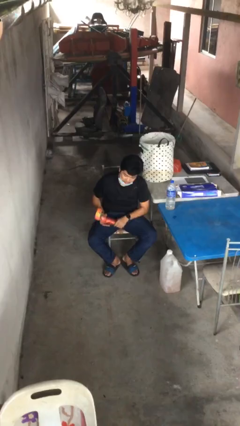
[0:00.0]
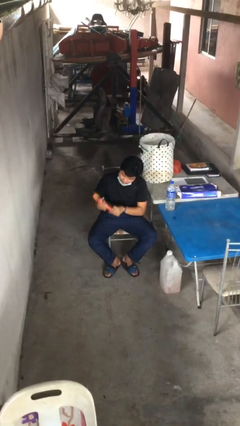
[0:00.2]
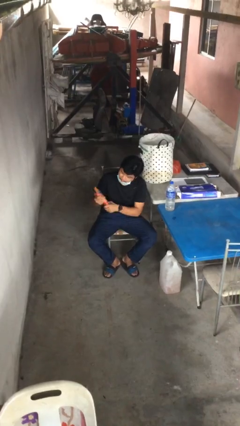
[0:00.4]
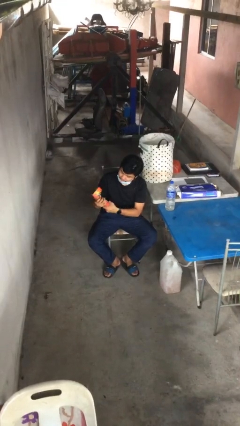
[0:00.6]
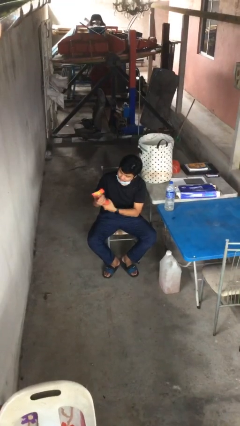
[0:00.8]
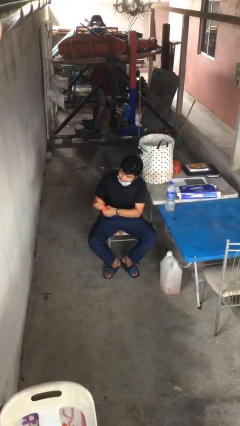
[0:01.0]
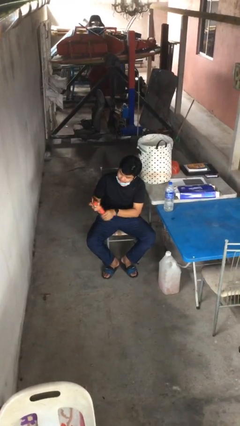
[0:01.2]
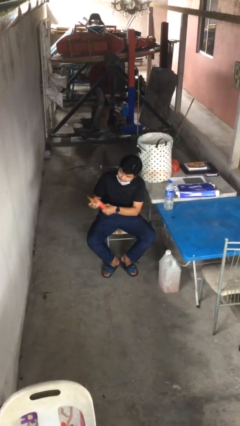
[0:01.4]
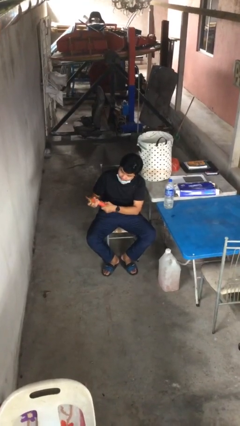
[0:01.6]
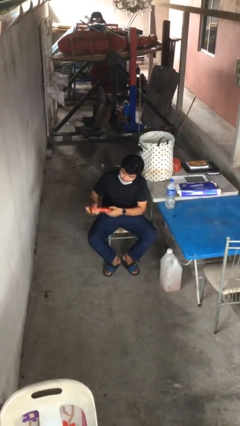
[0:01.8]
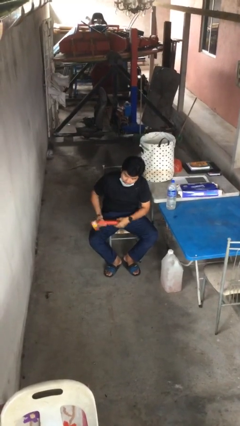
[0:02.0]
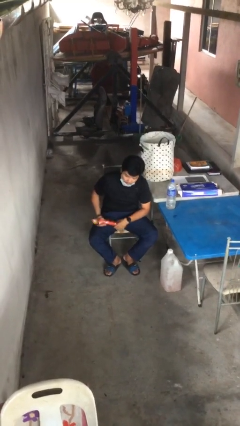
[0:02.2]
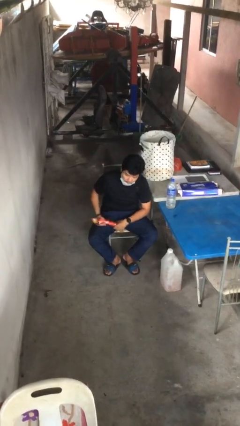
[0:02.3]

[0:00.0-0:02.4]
person squeezes object

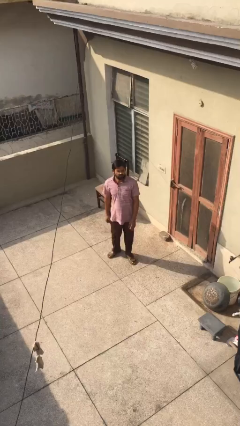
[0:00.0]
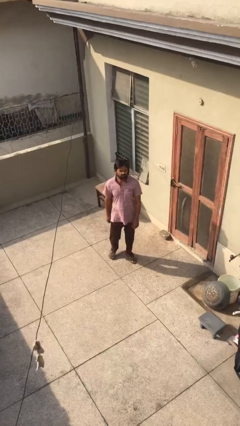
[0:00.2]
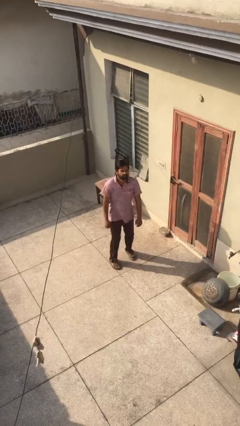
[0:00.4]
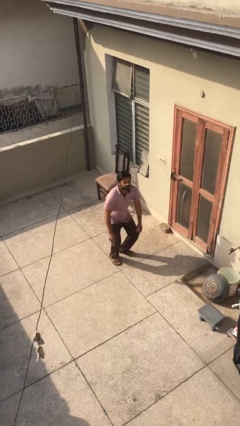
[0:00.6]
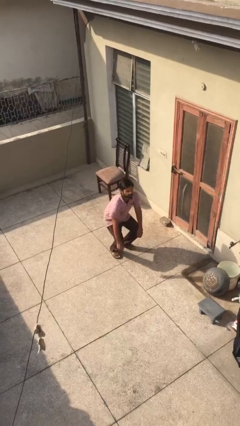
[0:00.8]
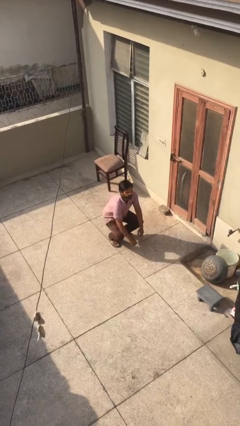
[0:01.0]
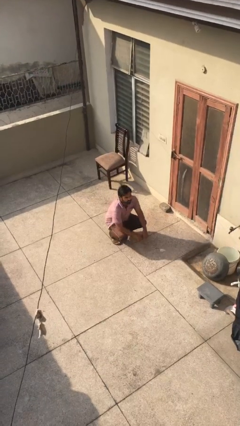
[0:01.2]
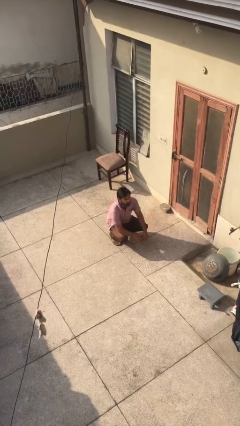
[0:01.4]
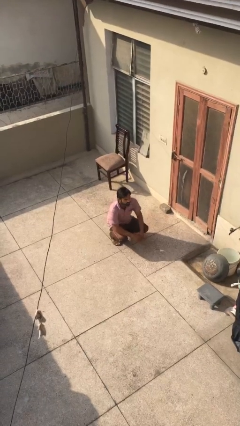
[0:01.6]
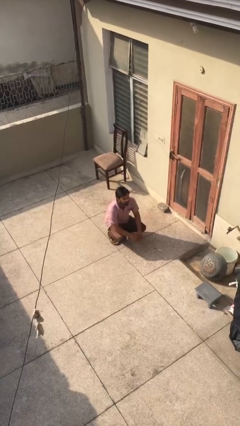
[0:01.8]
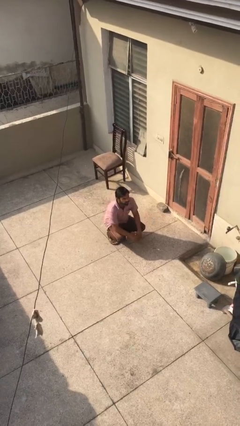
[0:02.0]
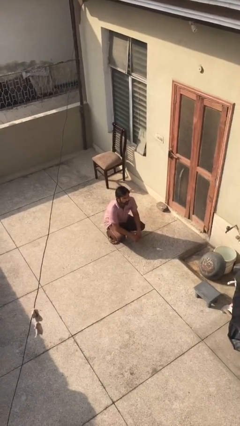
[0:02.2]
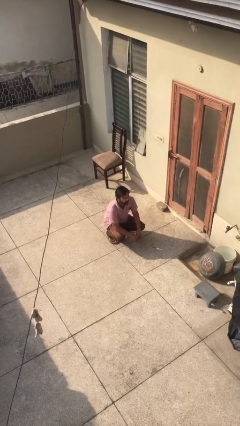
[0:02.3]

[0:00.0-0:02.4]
person sits down

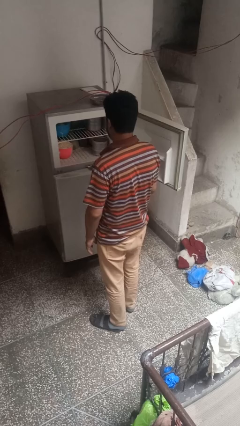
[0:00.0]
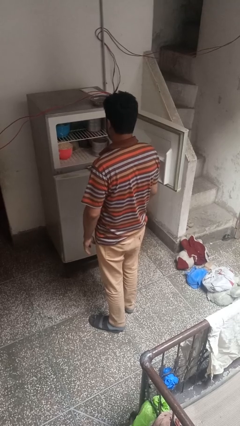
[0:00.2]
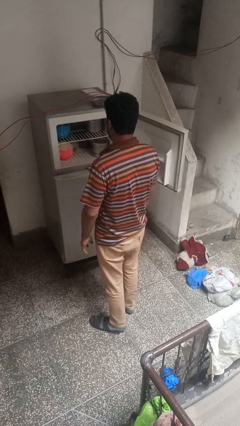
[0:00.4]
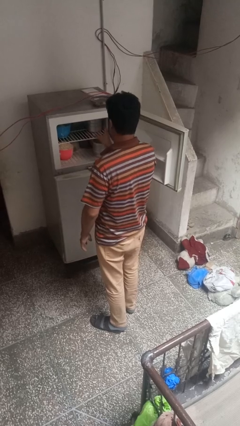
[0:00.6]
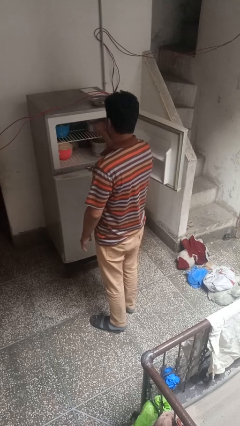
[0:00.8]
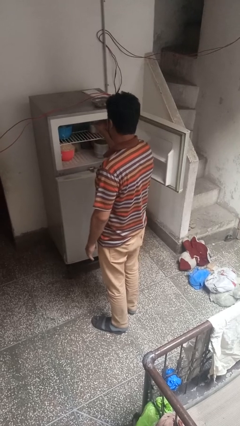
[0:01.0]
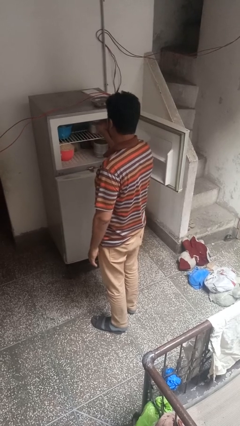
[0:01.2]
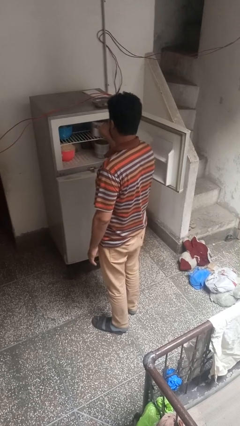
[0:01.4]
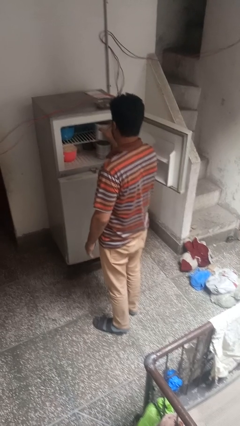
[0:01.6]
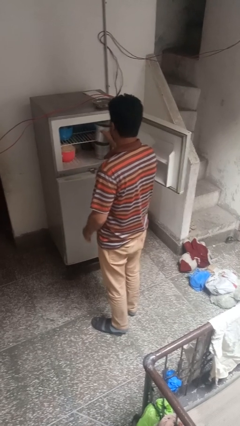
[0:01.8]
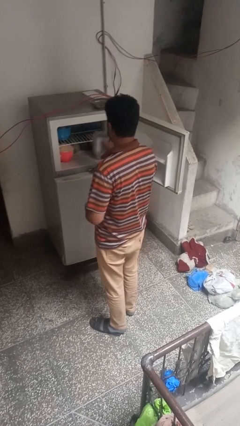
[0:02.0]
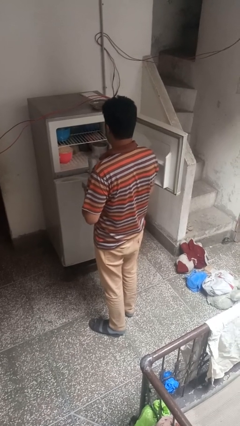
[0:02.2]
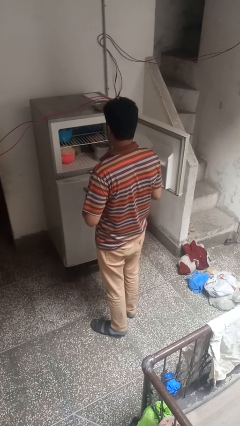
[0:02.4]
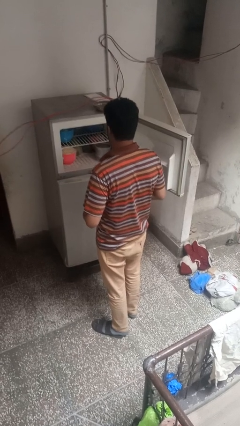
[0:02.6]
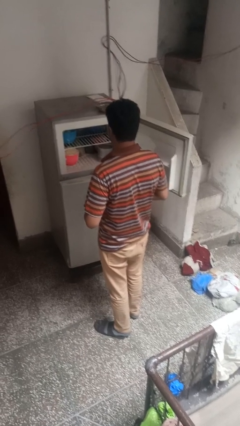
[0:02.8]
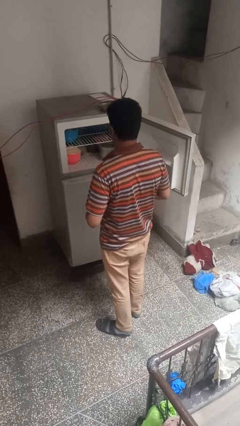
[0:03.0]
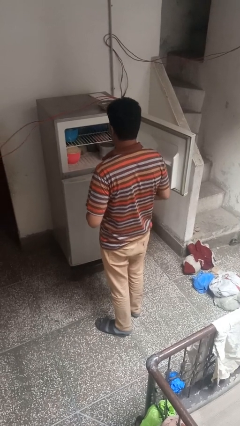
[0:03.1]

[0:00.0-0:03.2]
person takes object from refrigerator

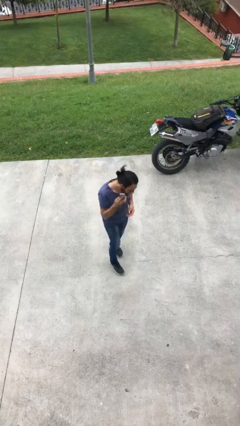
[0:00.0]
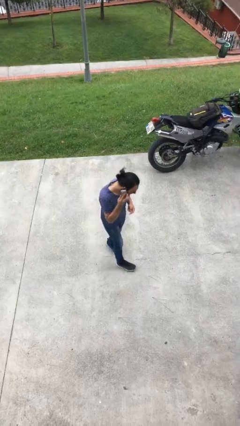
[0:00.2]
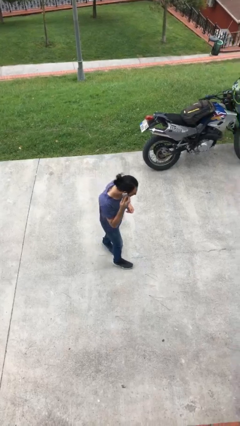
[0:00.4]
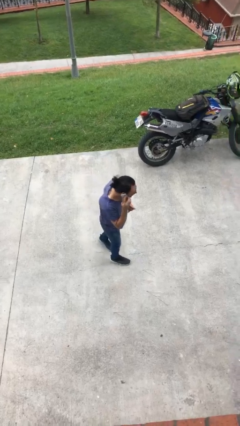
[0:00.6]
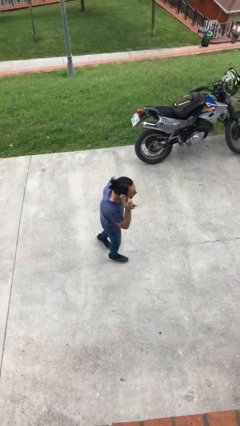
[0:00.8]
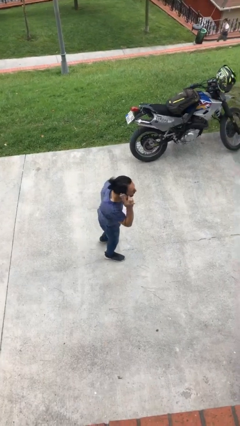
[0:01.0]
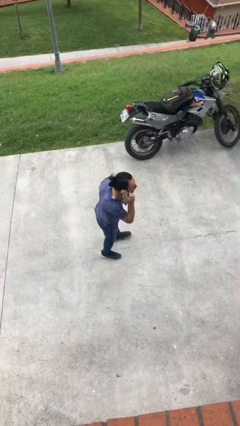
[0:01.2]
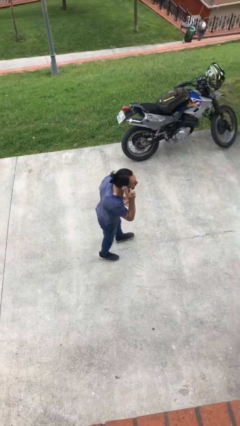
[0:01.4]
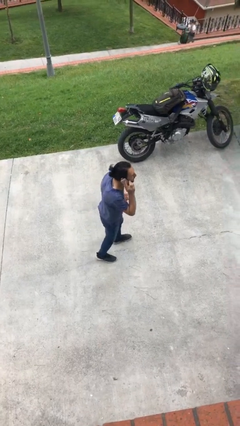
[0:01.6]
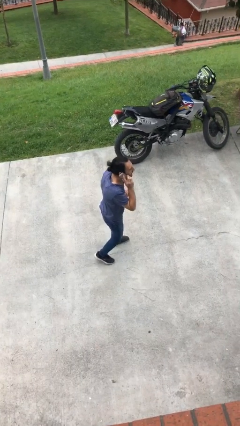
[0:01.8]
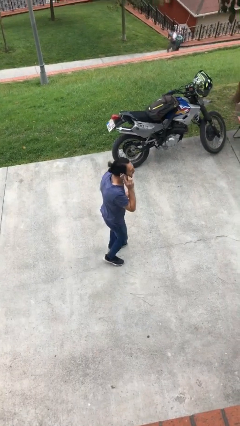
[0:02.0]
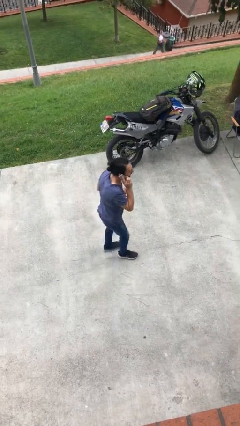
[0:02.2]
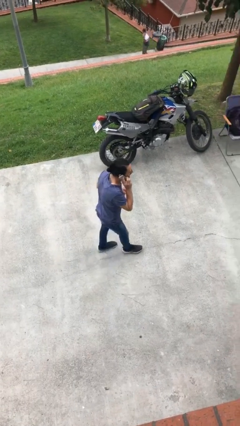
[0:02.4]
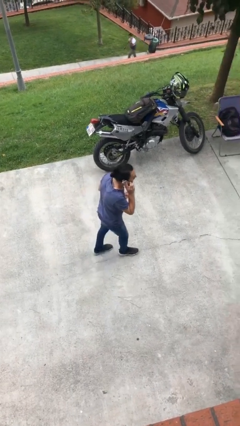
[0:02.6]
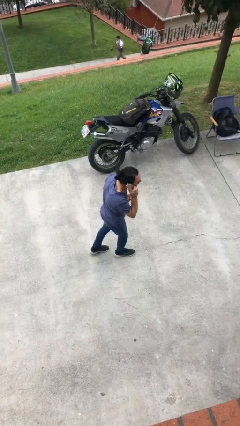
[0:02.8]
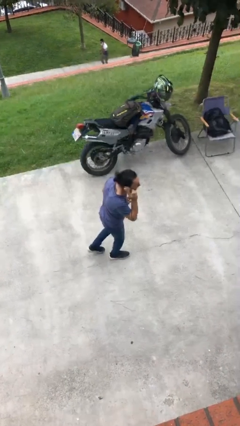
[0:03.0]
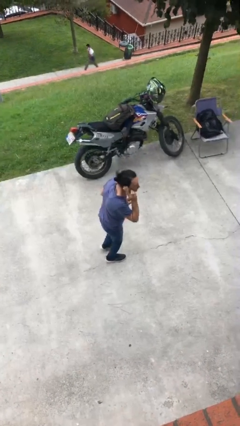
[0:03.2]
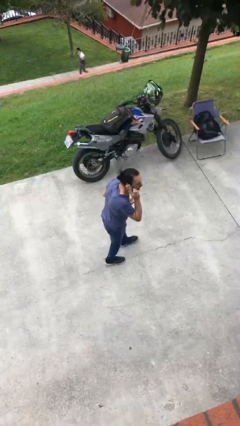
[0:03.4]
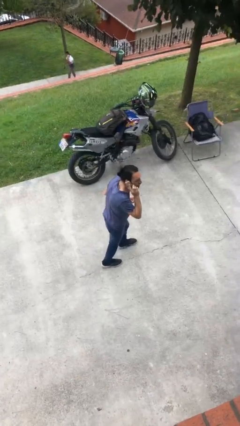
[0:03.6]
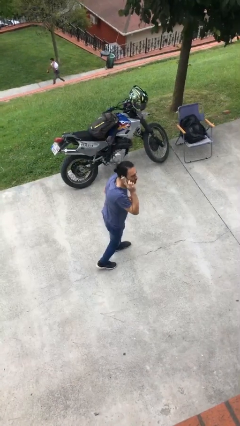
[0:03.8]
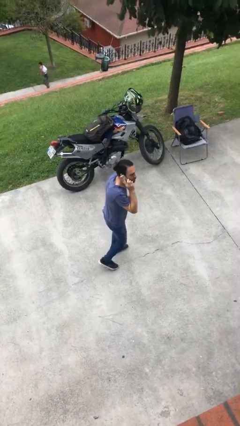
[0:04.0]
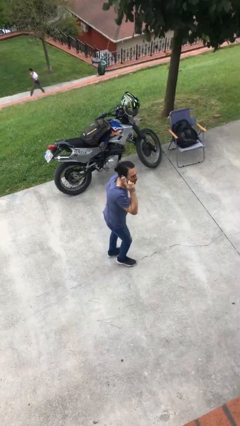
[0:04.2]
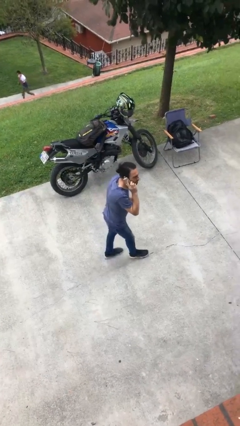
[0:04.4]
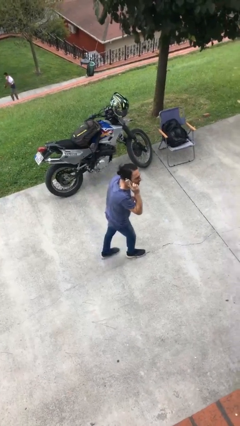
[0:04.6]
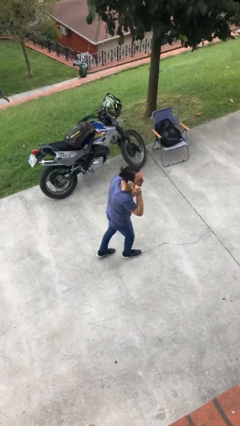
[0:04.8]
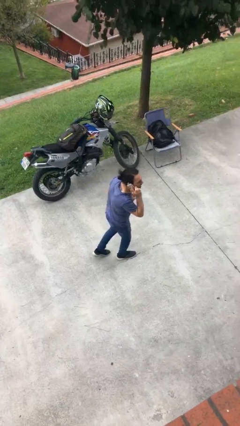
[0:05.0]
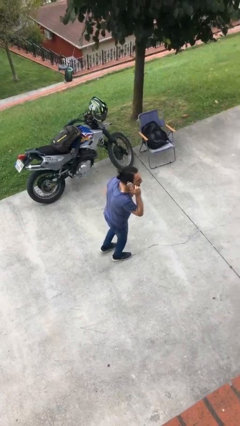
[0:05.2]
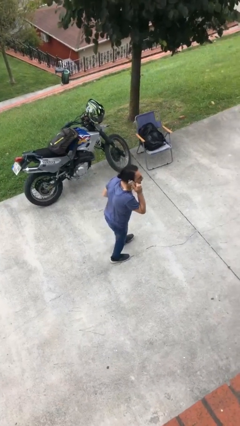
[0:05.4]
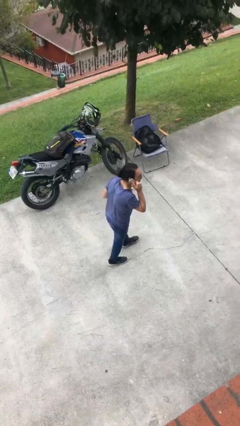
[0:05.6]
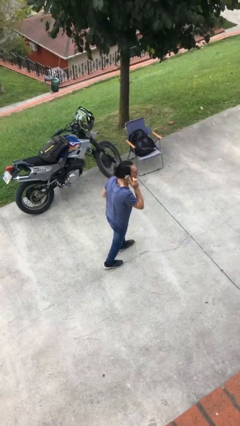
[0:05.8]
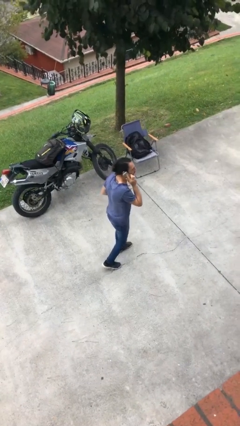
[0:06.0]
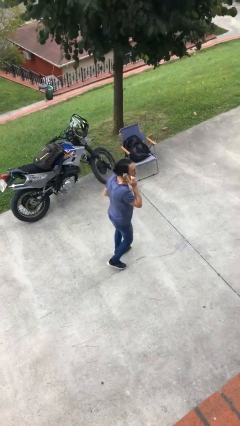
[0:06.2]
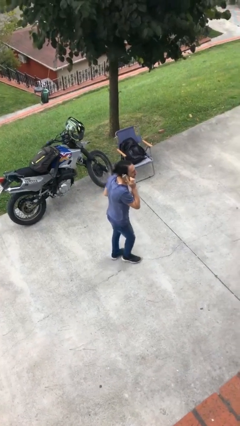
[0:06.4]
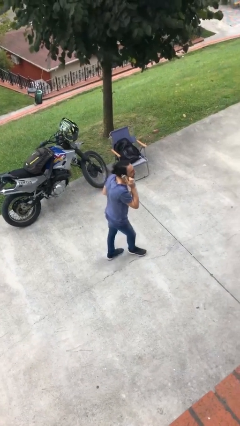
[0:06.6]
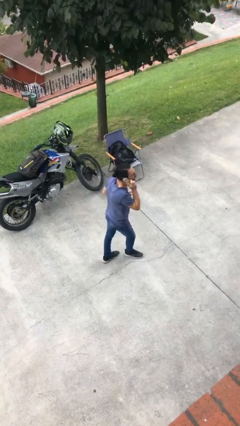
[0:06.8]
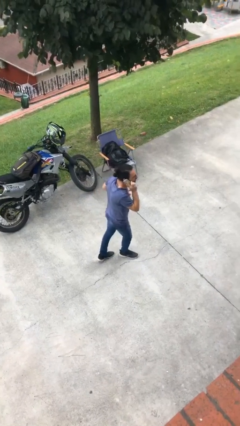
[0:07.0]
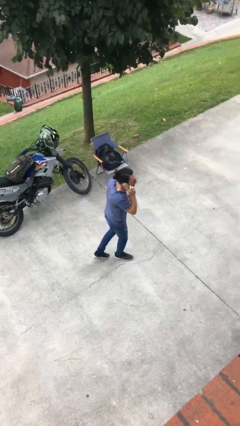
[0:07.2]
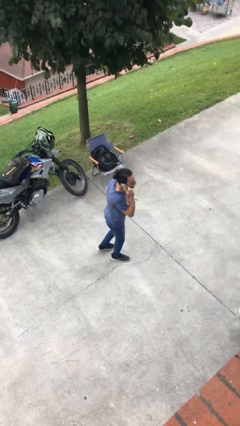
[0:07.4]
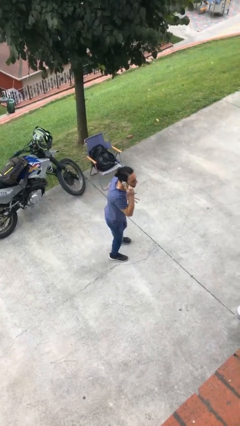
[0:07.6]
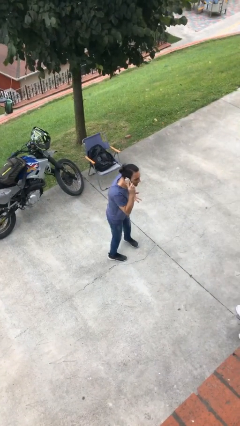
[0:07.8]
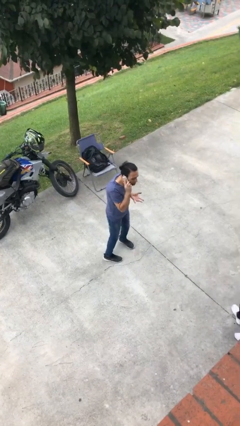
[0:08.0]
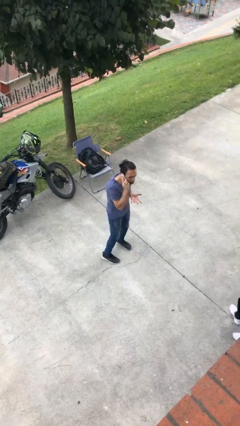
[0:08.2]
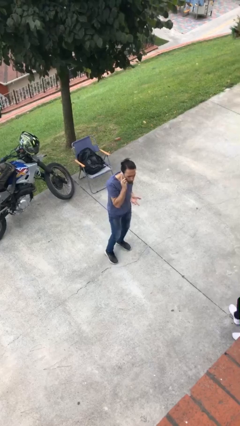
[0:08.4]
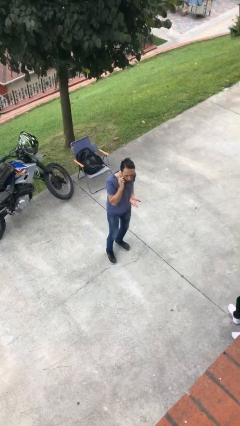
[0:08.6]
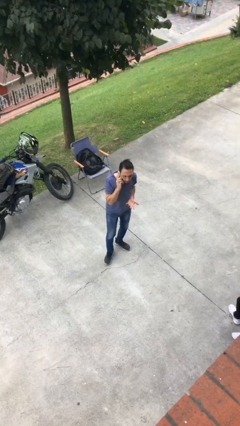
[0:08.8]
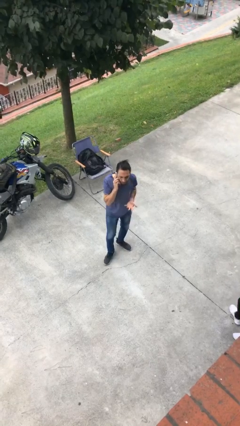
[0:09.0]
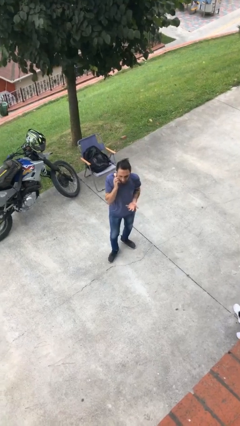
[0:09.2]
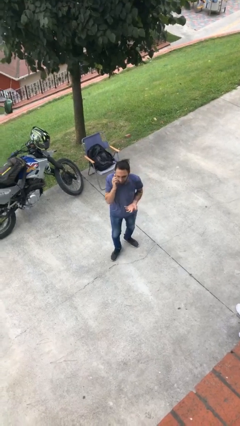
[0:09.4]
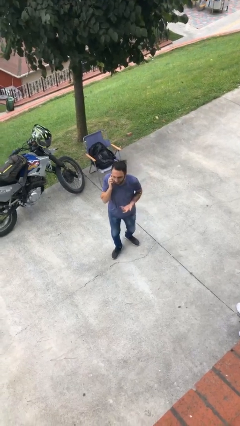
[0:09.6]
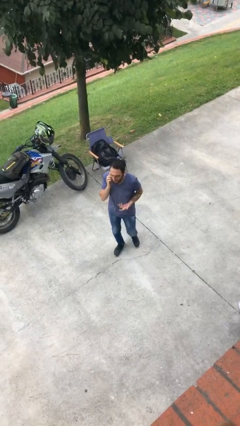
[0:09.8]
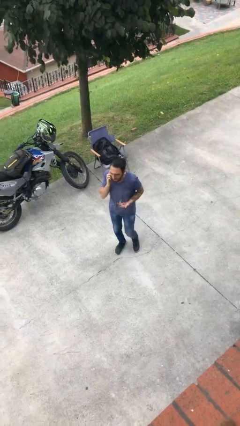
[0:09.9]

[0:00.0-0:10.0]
person talks on phone
